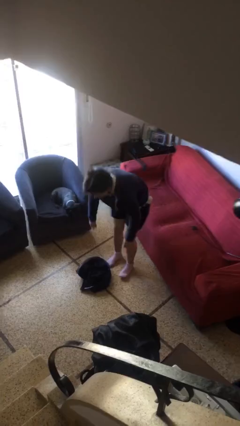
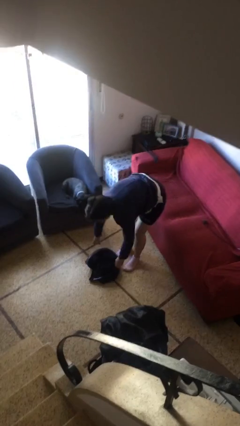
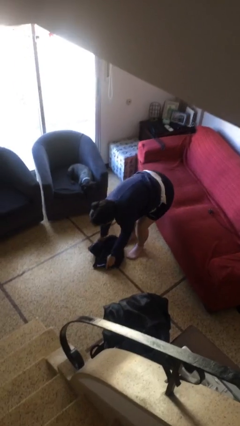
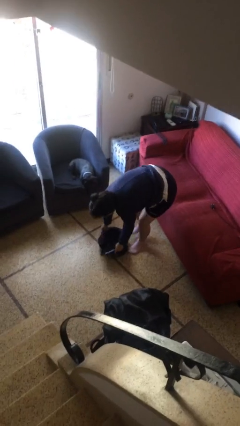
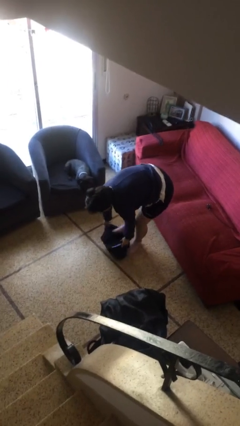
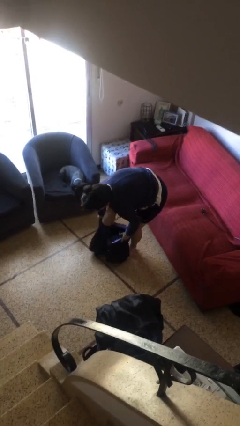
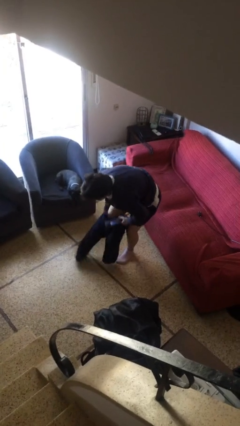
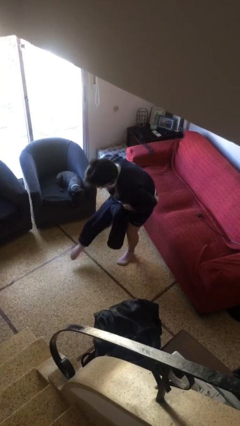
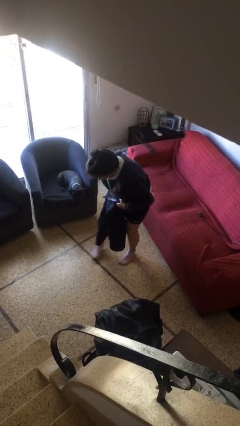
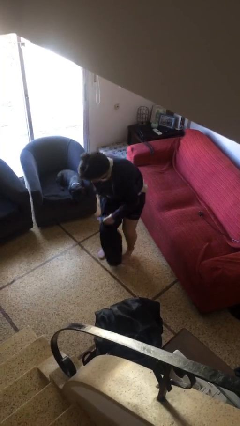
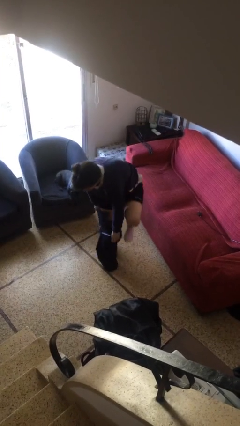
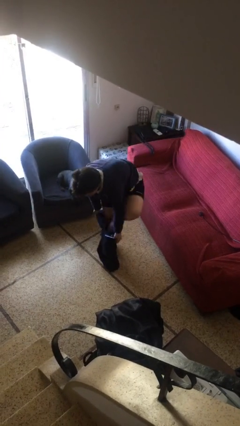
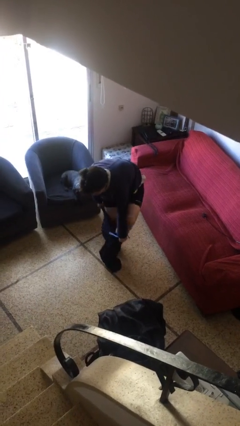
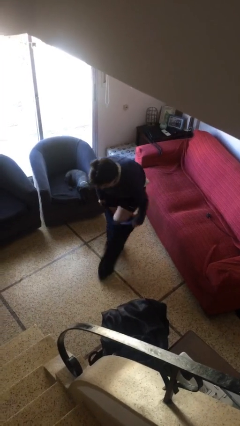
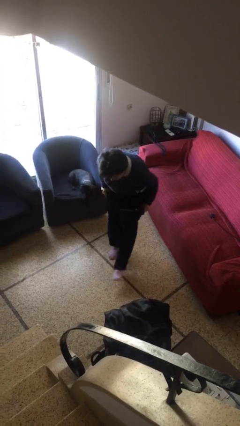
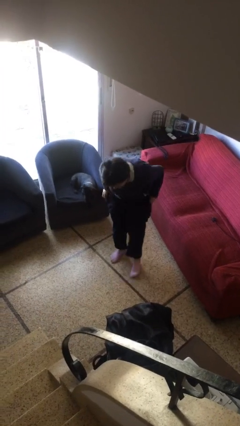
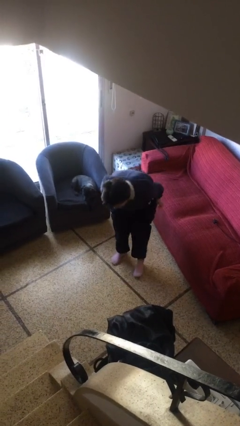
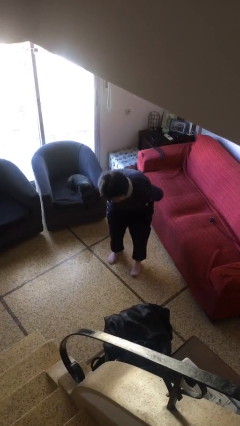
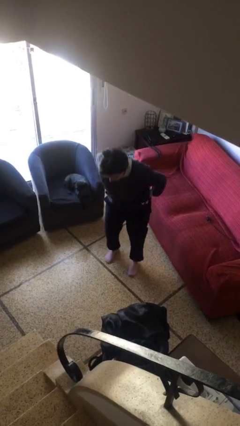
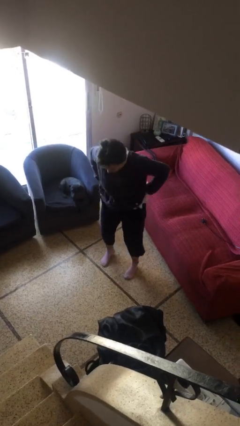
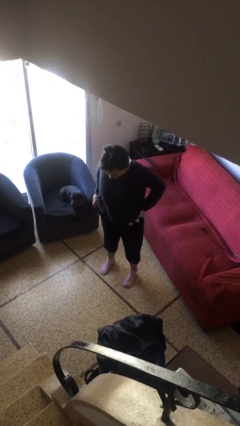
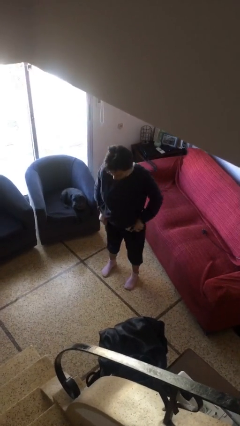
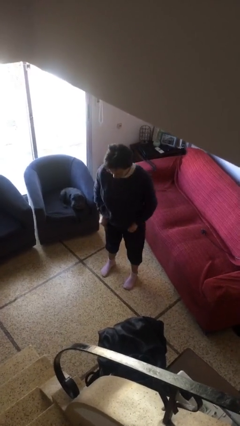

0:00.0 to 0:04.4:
person puts on pants

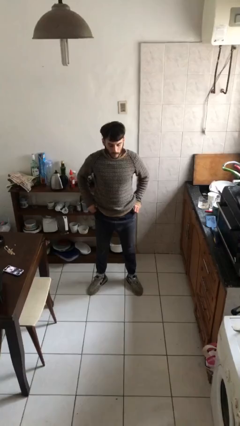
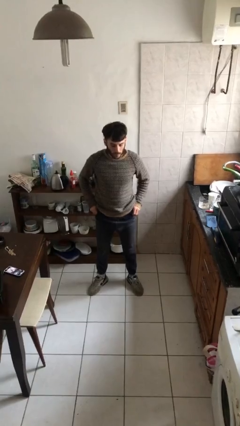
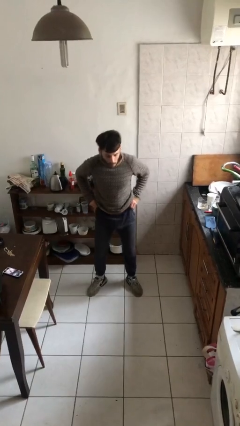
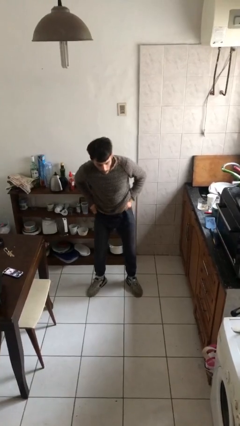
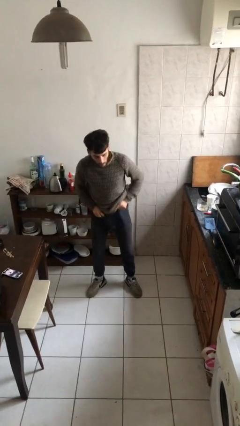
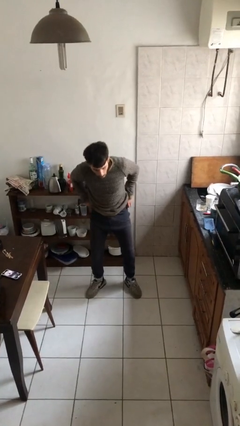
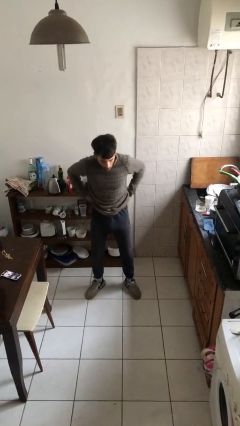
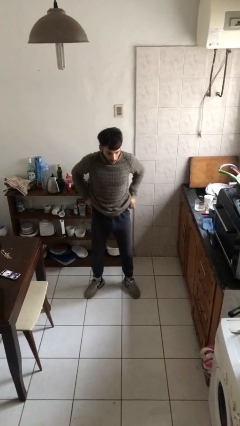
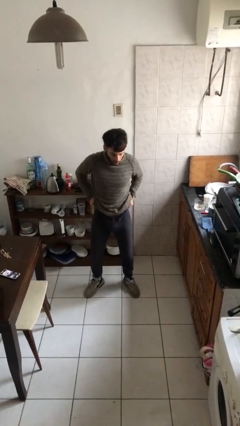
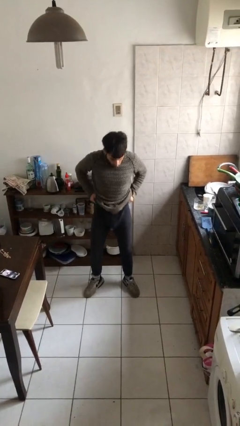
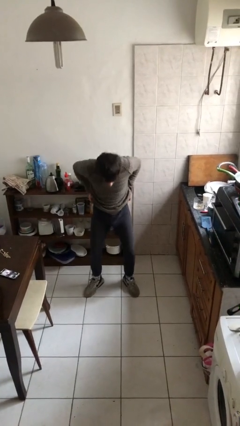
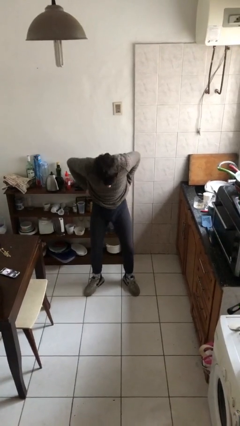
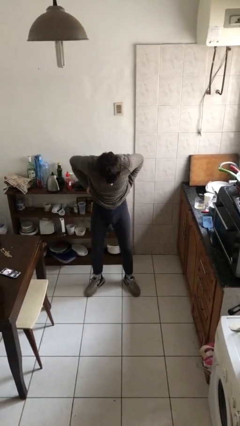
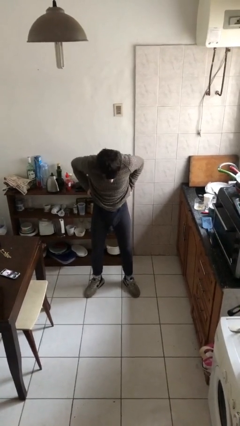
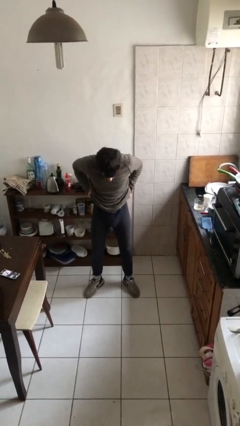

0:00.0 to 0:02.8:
person hikes up pants

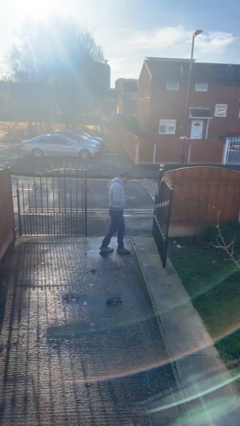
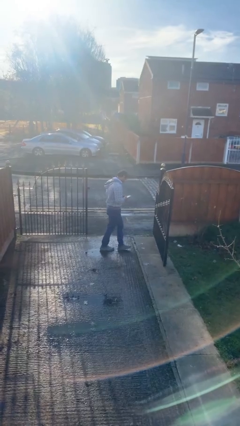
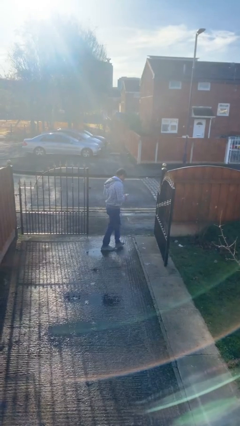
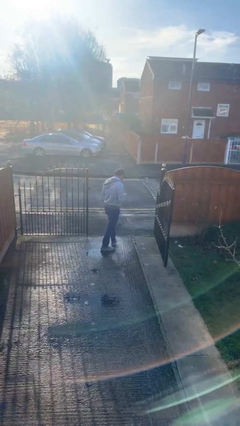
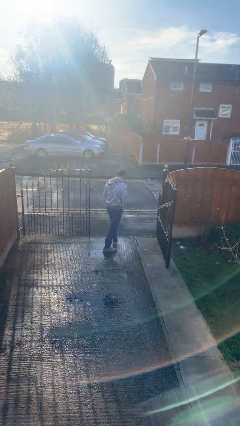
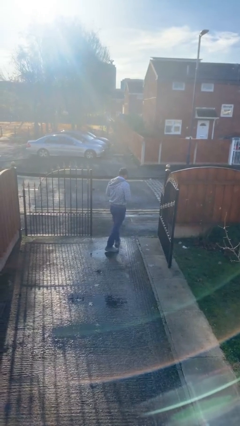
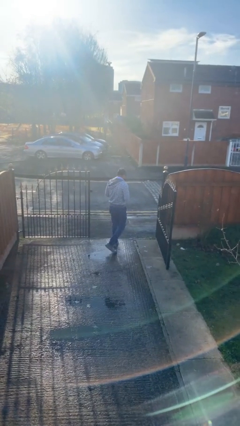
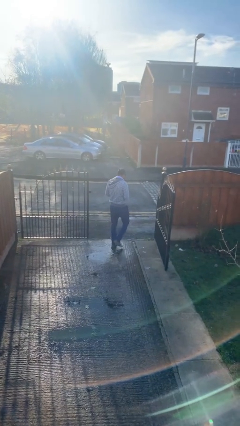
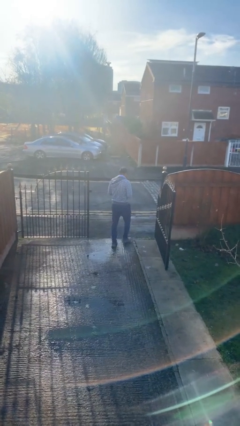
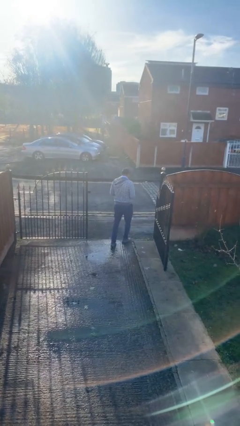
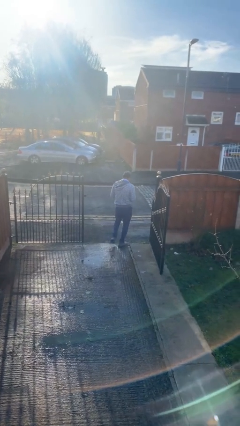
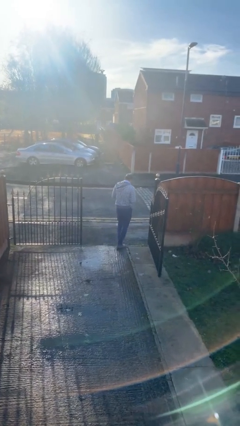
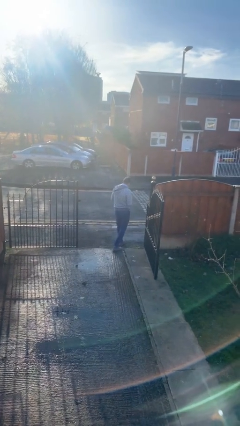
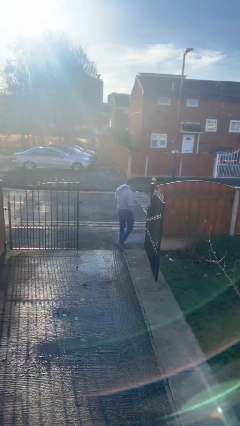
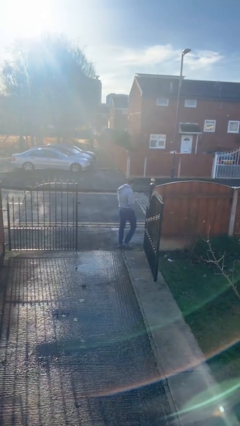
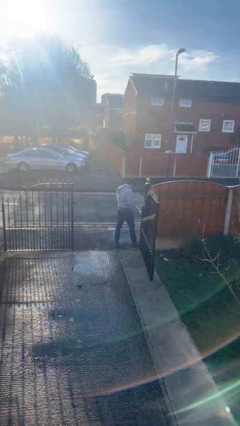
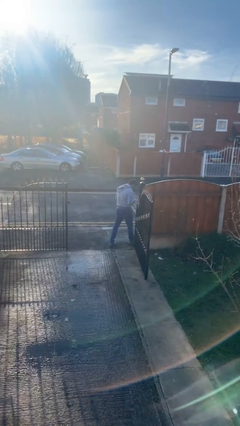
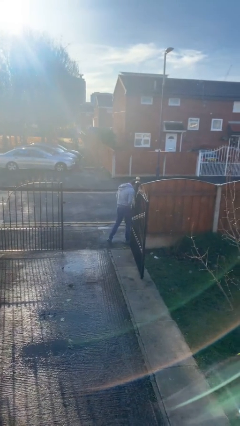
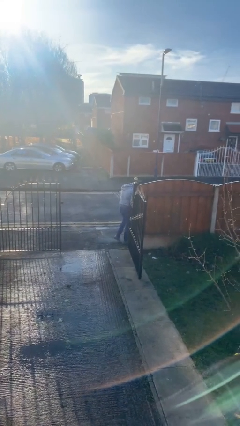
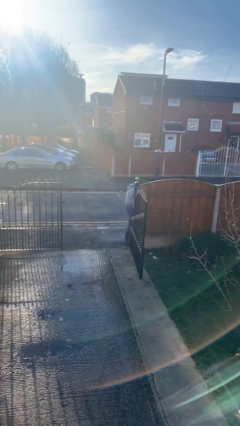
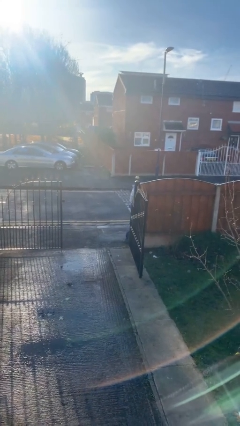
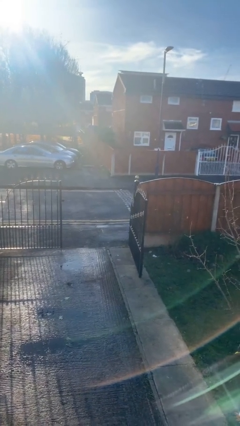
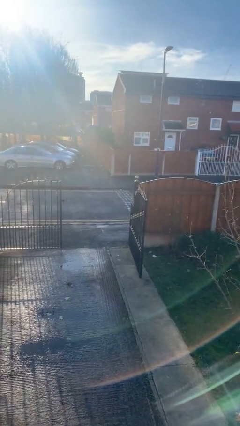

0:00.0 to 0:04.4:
person exits scene through structure

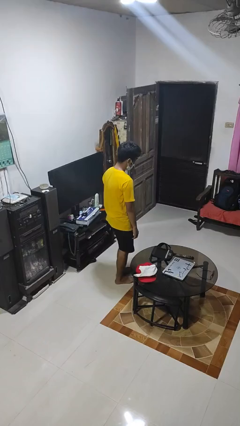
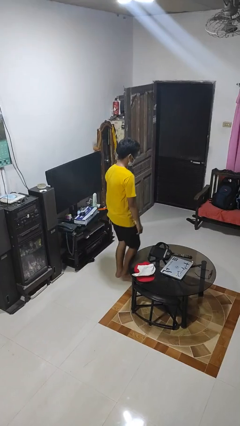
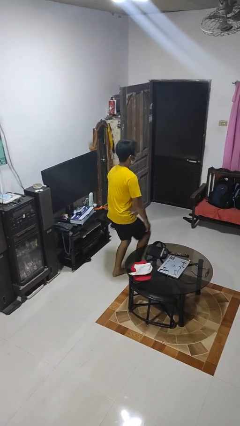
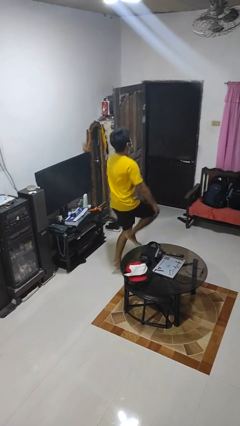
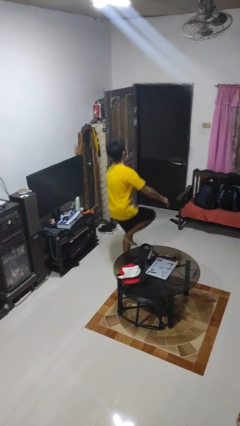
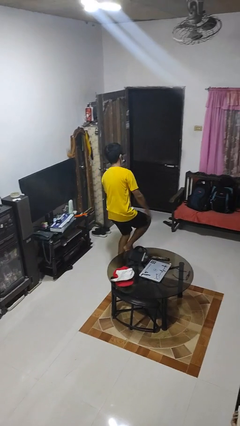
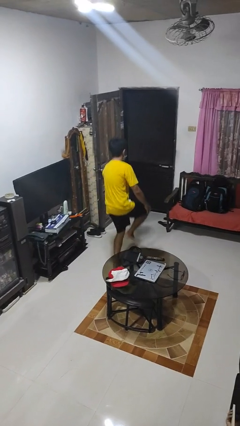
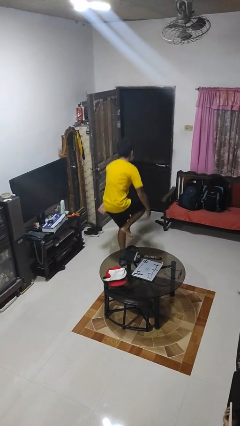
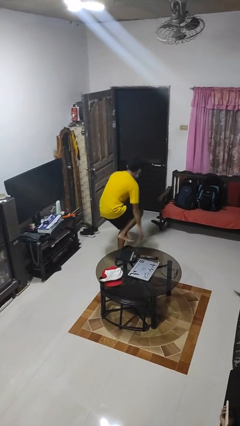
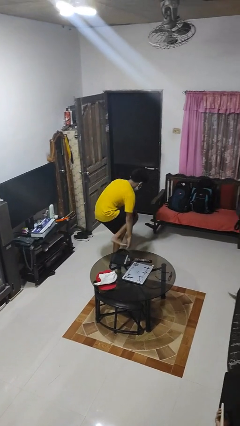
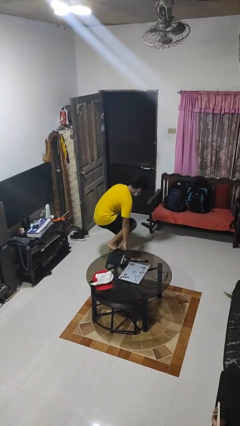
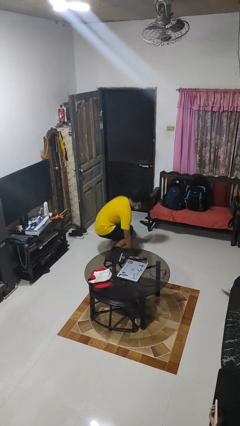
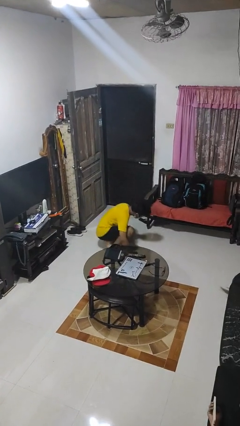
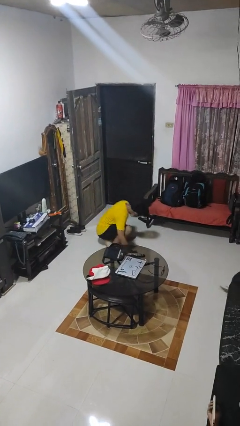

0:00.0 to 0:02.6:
person trips on object on floor

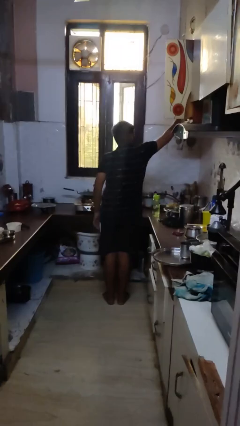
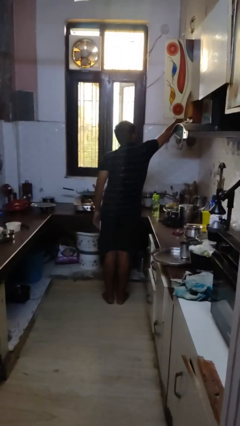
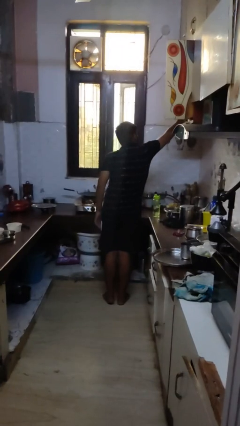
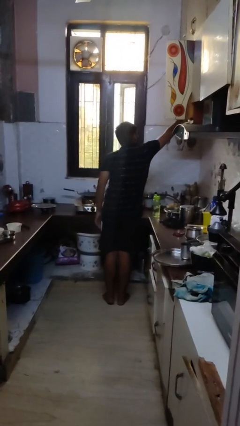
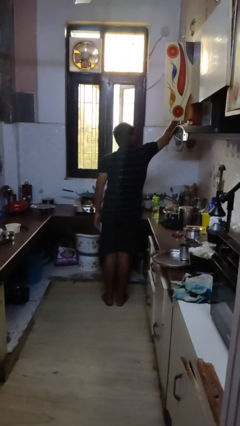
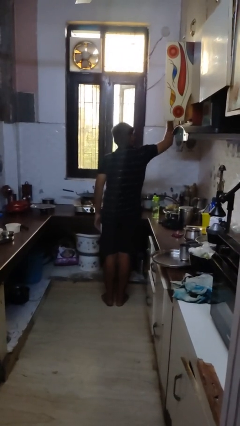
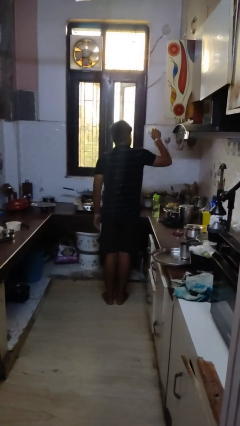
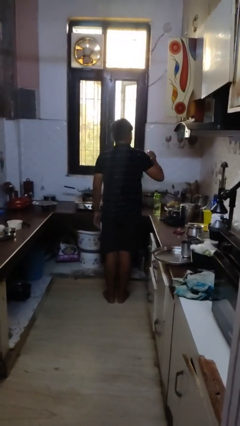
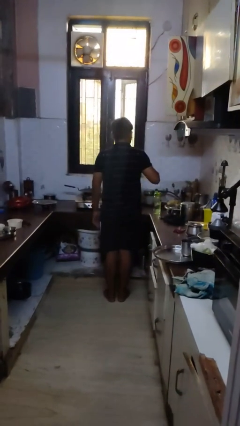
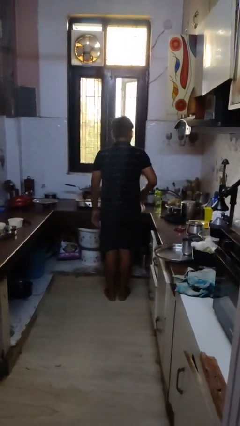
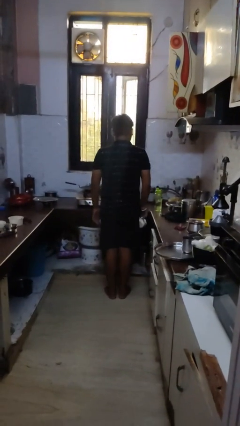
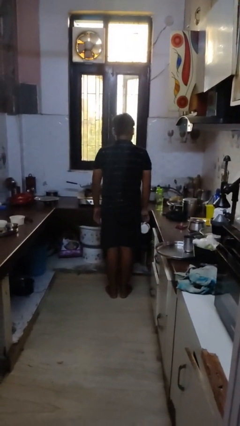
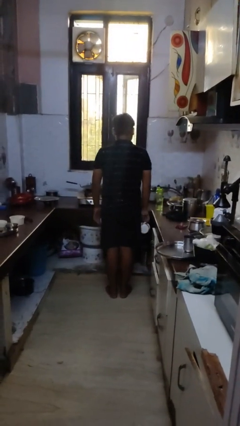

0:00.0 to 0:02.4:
person takes object from cabinet

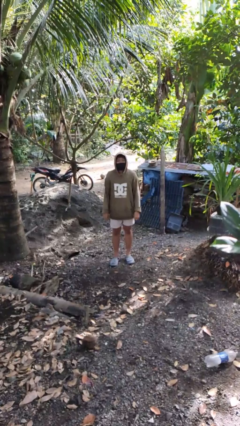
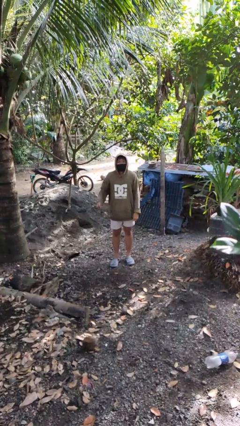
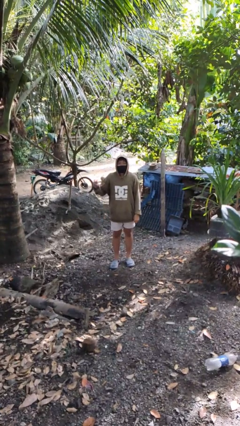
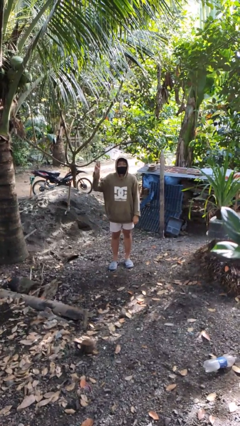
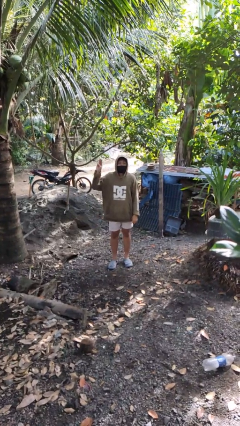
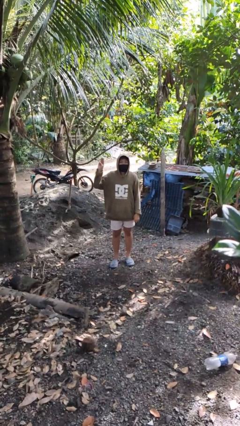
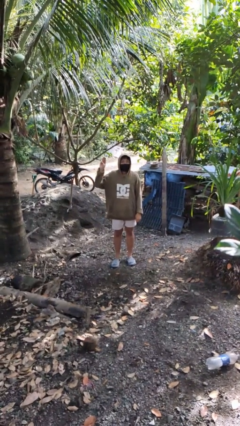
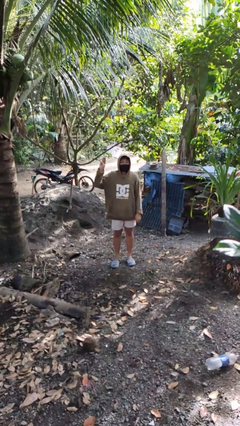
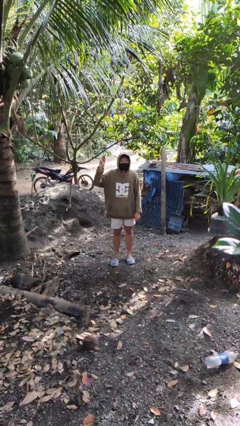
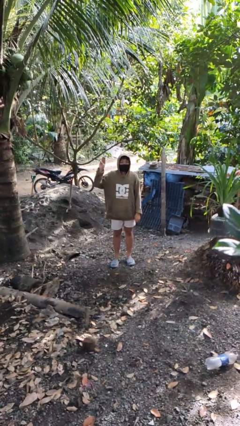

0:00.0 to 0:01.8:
person gestures number three
